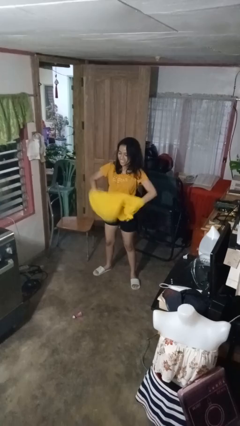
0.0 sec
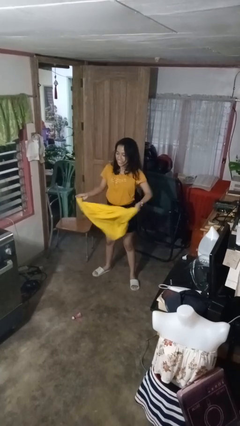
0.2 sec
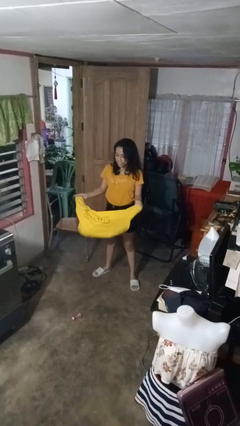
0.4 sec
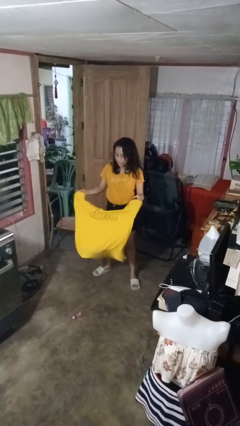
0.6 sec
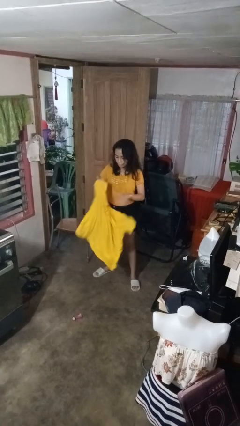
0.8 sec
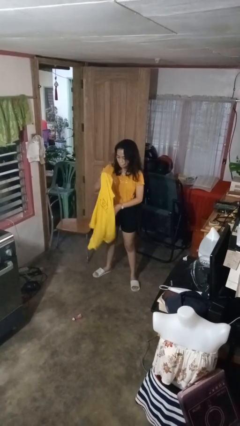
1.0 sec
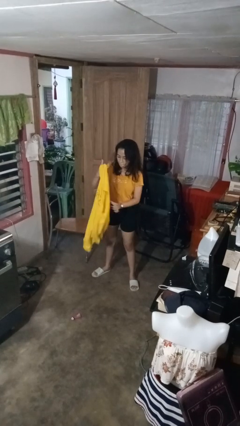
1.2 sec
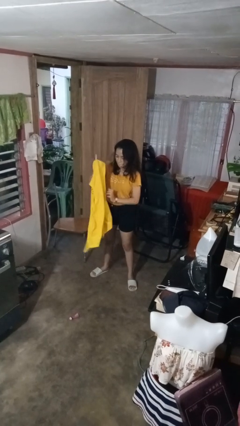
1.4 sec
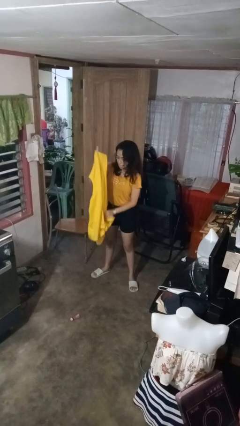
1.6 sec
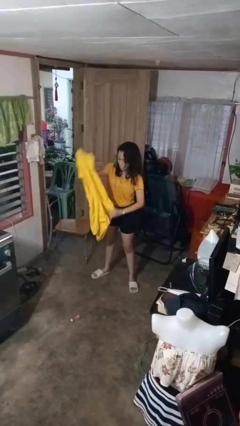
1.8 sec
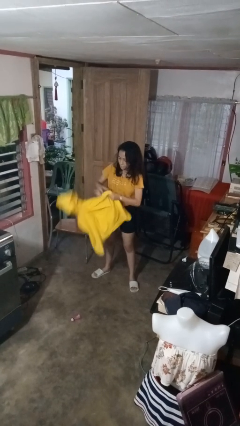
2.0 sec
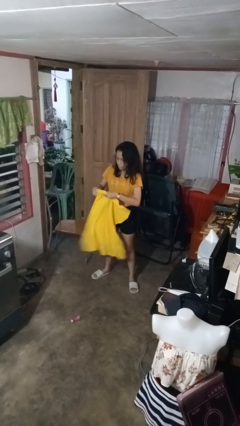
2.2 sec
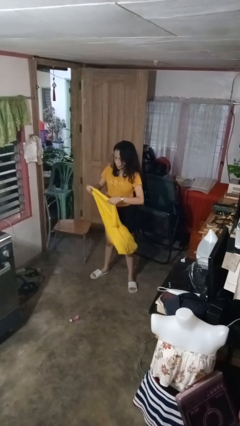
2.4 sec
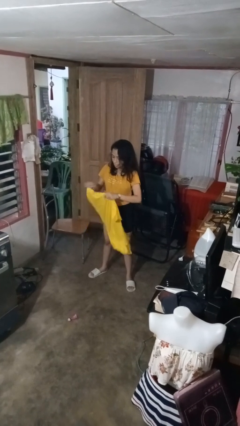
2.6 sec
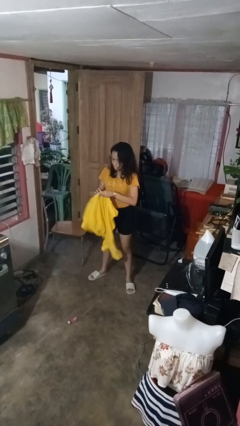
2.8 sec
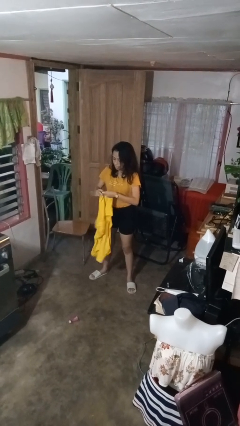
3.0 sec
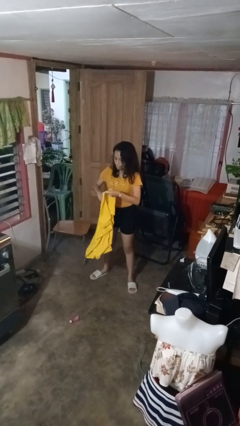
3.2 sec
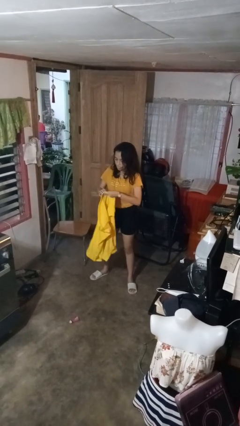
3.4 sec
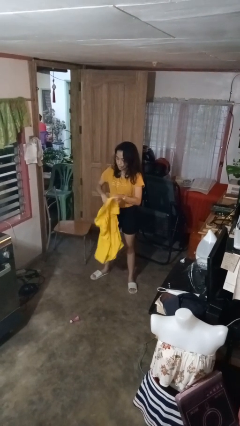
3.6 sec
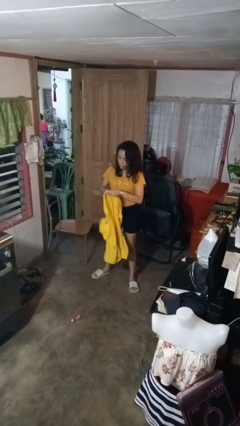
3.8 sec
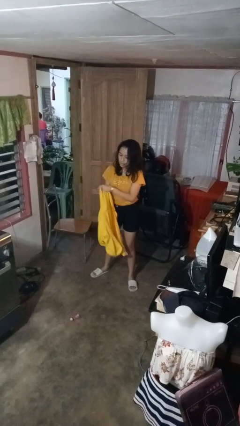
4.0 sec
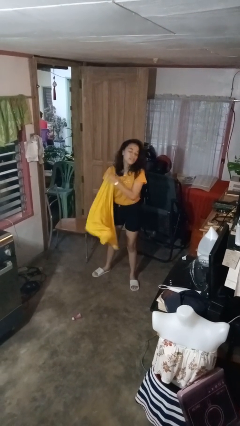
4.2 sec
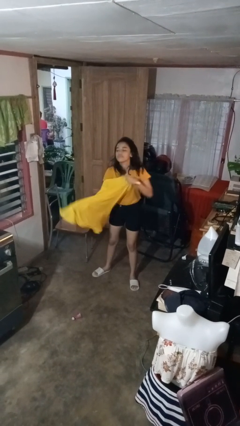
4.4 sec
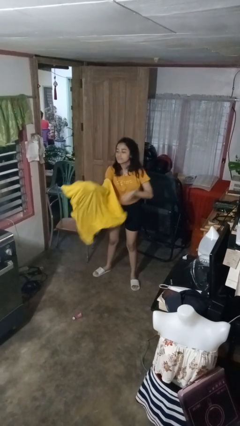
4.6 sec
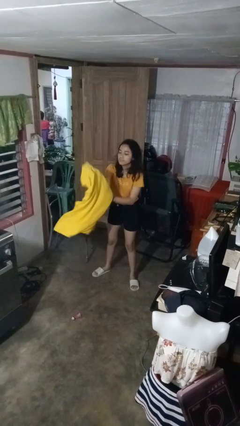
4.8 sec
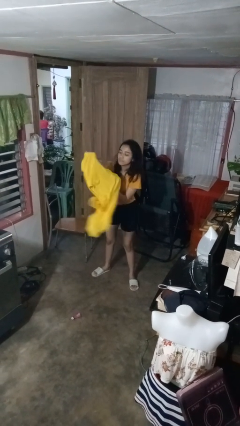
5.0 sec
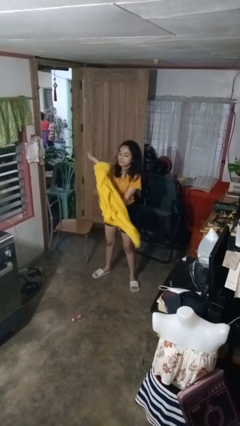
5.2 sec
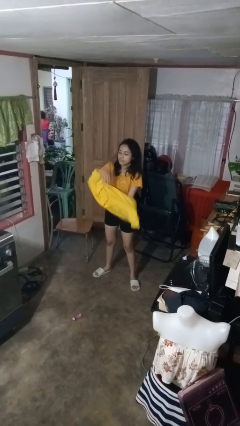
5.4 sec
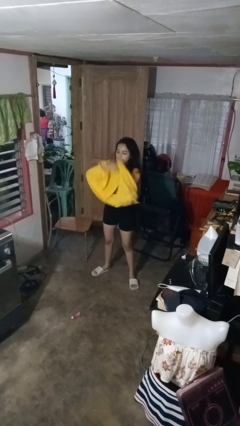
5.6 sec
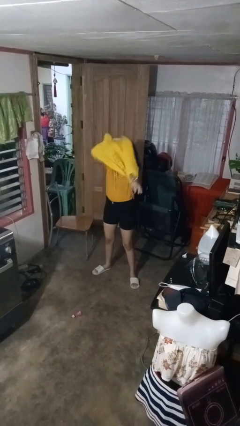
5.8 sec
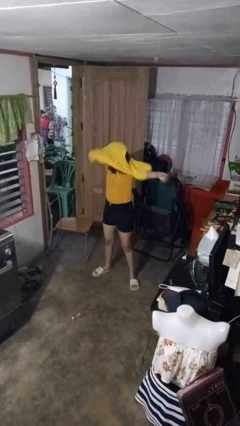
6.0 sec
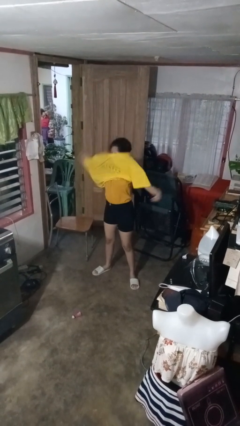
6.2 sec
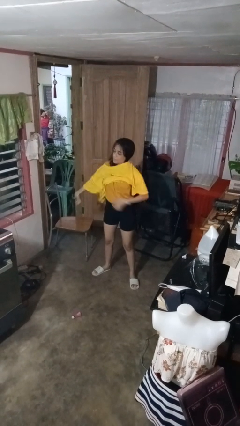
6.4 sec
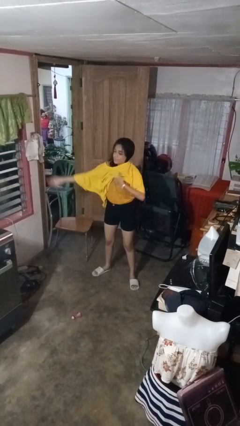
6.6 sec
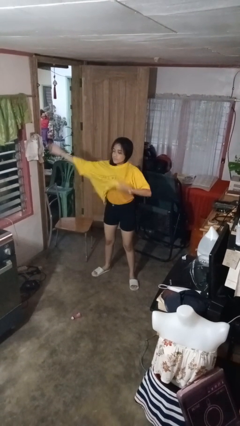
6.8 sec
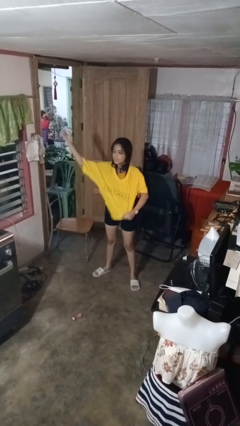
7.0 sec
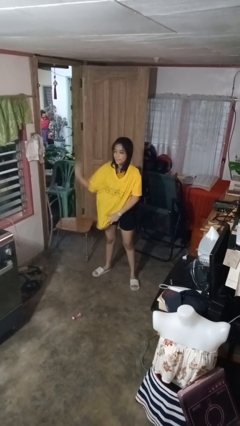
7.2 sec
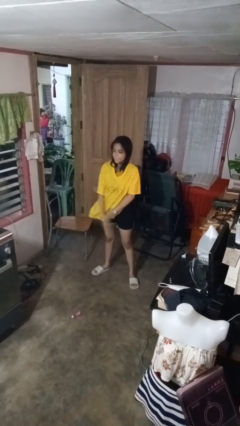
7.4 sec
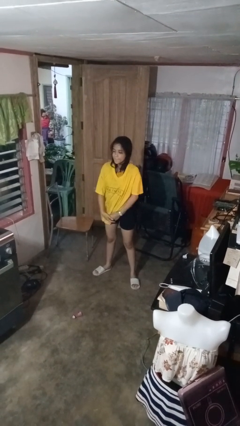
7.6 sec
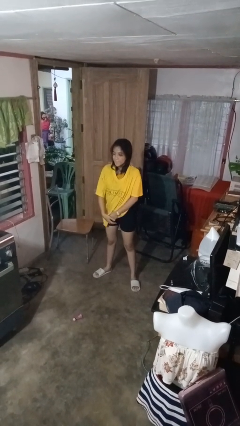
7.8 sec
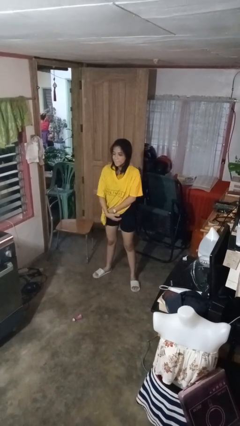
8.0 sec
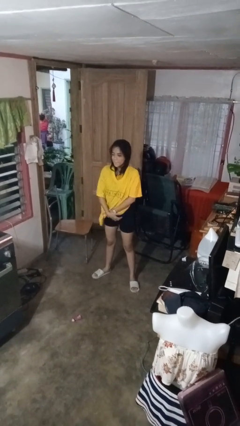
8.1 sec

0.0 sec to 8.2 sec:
person puts on shirt

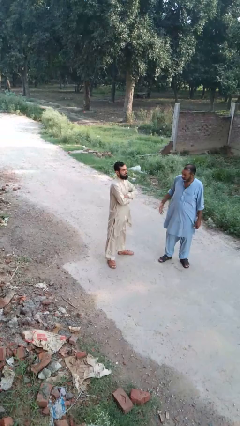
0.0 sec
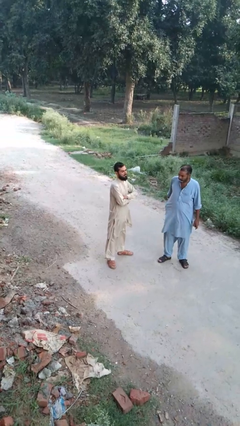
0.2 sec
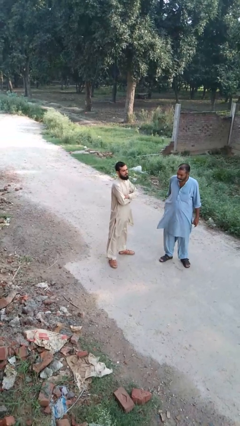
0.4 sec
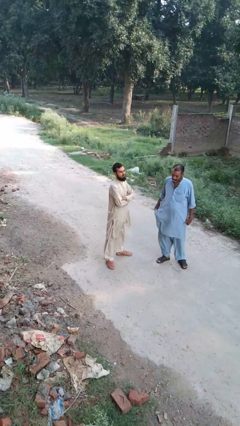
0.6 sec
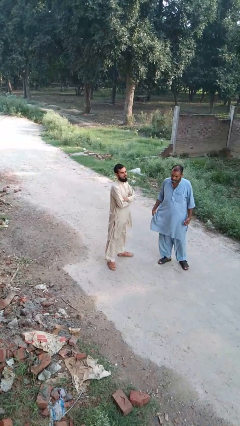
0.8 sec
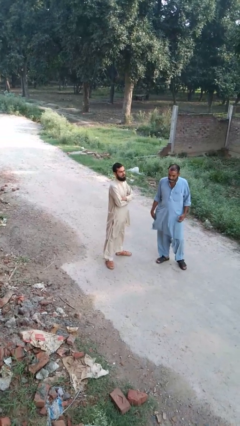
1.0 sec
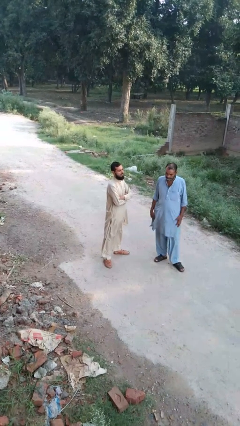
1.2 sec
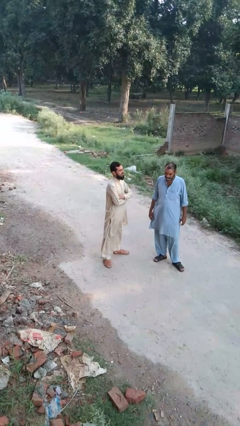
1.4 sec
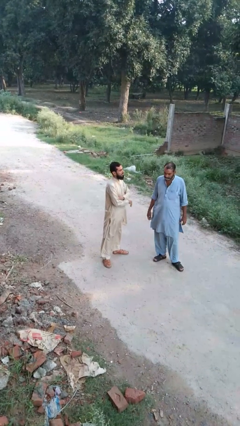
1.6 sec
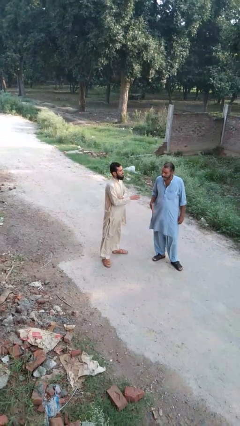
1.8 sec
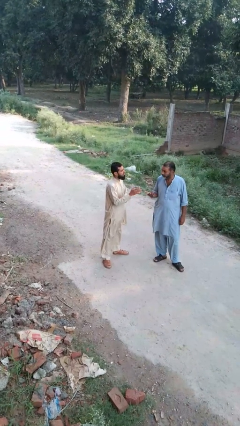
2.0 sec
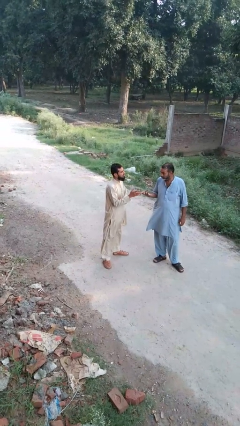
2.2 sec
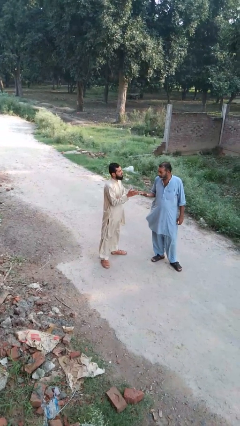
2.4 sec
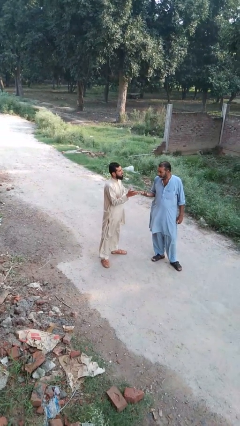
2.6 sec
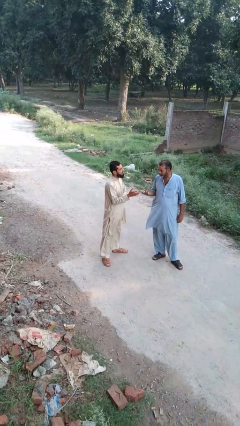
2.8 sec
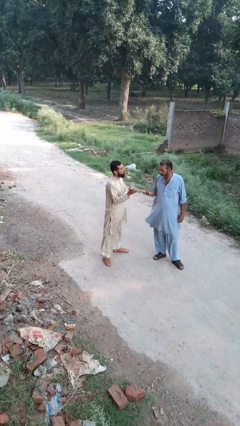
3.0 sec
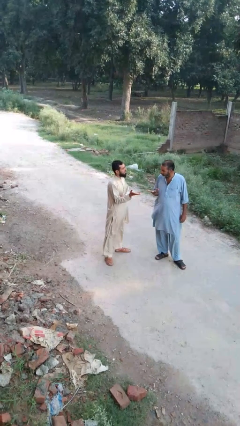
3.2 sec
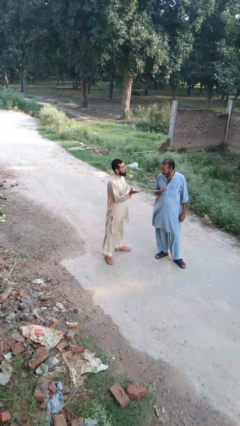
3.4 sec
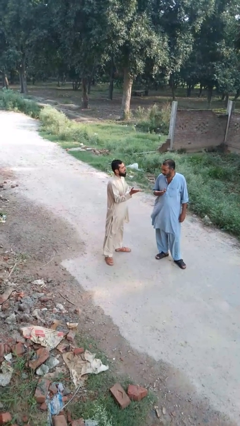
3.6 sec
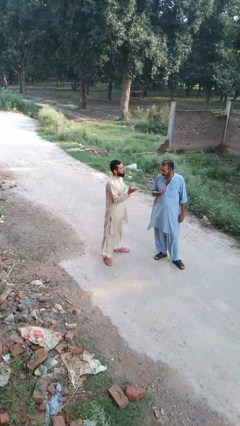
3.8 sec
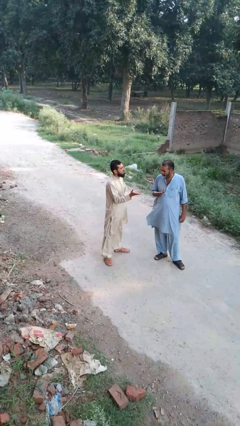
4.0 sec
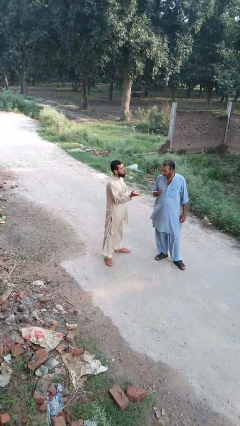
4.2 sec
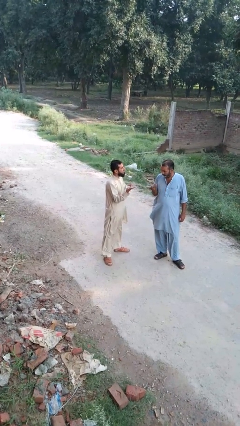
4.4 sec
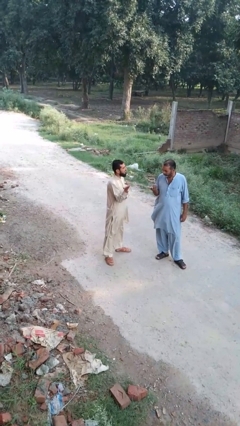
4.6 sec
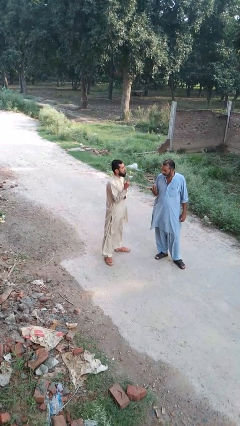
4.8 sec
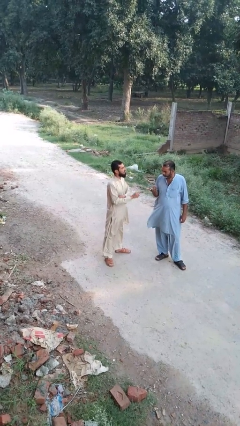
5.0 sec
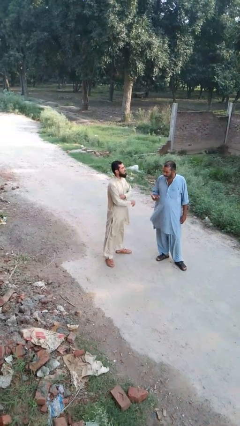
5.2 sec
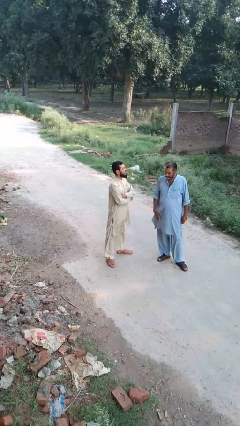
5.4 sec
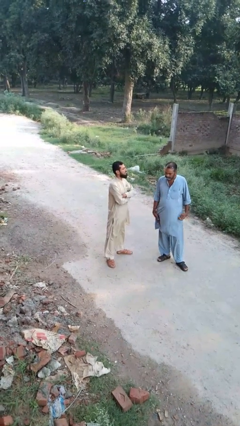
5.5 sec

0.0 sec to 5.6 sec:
person talks to person

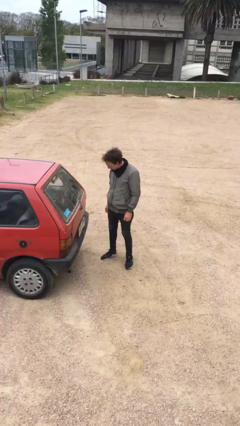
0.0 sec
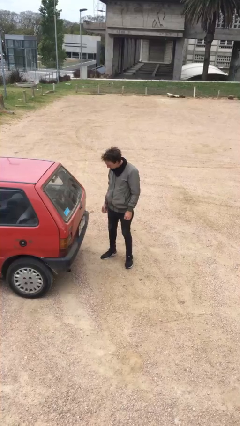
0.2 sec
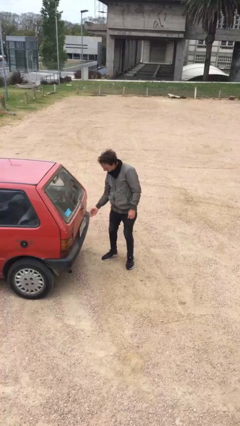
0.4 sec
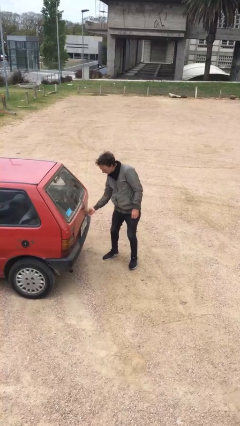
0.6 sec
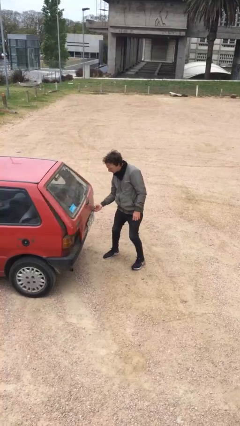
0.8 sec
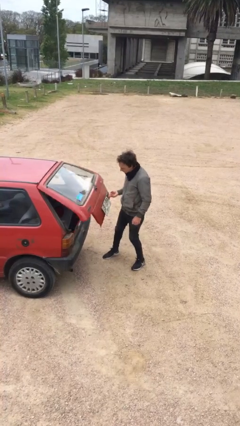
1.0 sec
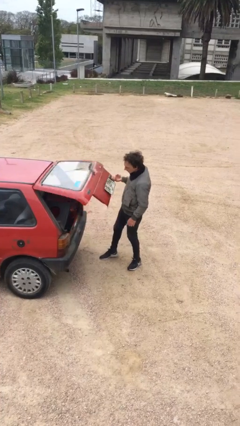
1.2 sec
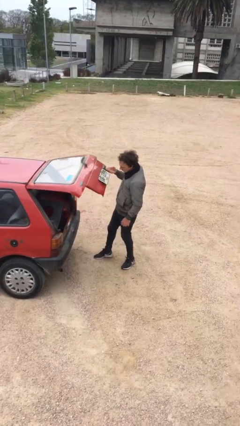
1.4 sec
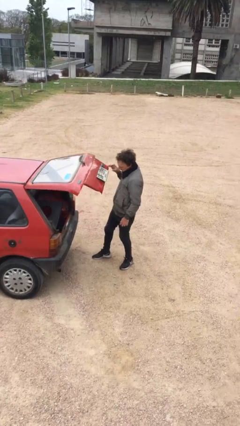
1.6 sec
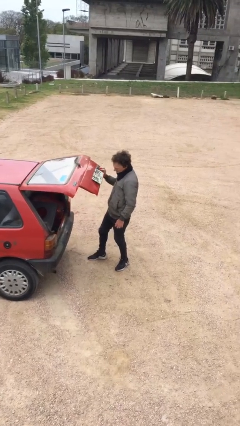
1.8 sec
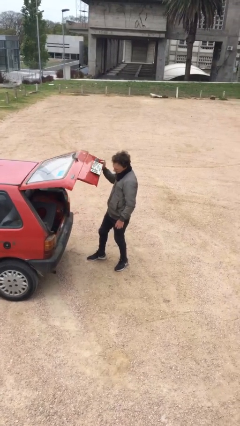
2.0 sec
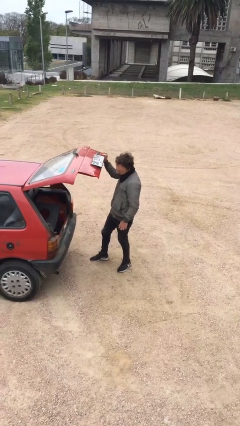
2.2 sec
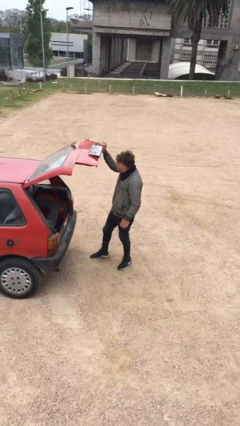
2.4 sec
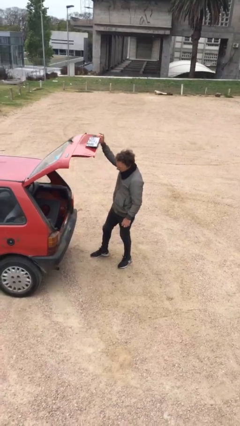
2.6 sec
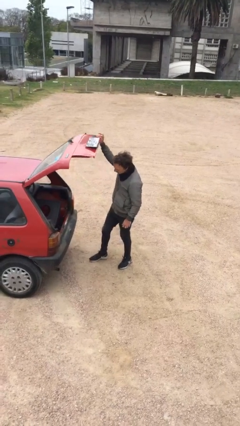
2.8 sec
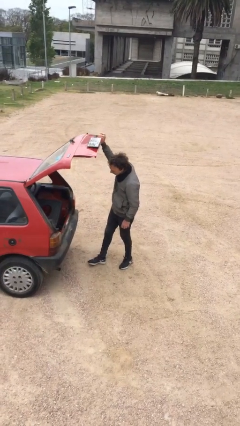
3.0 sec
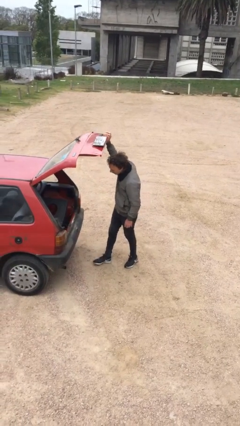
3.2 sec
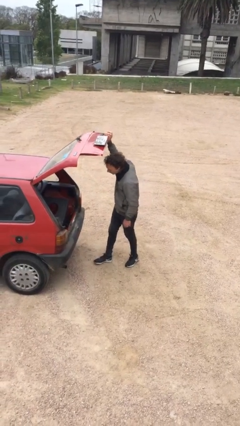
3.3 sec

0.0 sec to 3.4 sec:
person opens car trunk

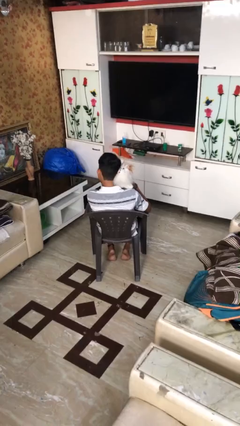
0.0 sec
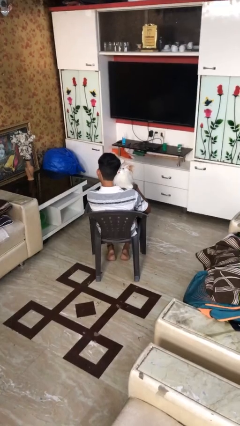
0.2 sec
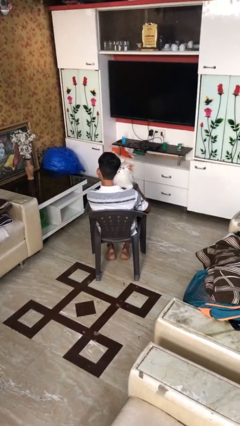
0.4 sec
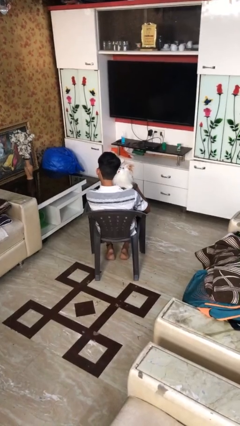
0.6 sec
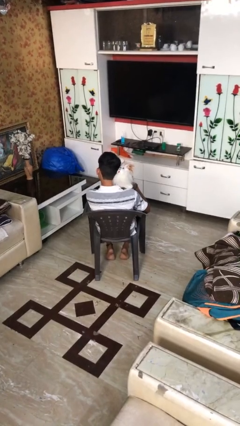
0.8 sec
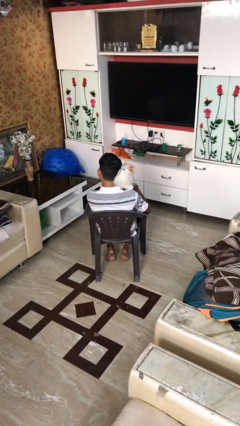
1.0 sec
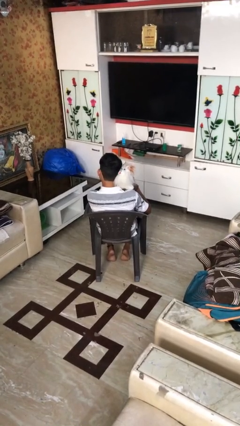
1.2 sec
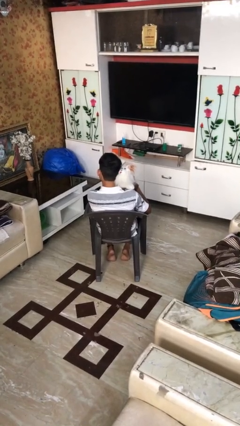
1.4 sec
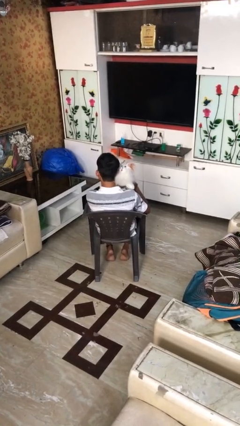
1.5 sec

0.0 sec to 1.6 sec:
person hugs stuffed animal
